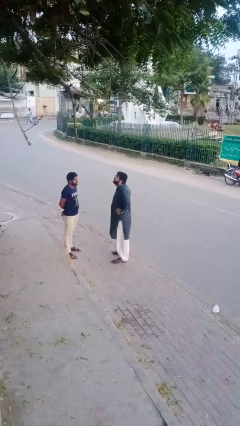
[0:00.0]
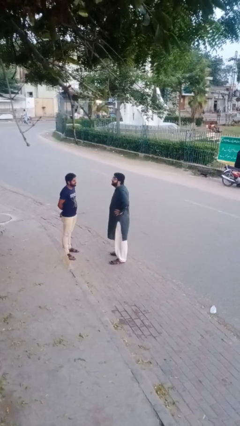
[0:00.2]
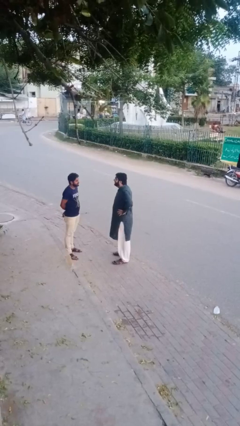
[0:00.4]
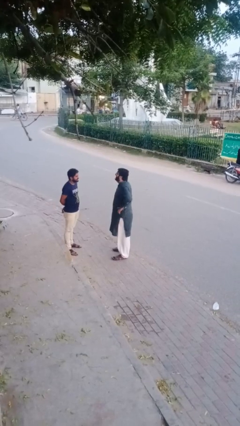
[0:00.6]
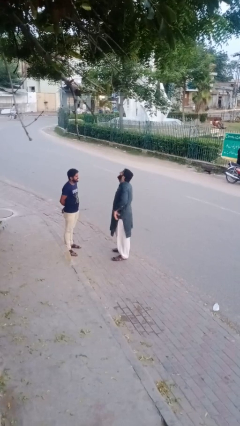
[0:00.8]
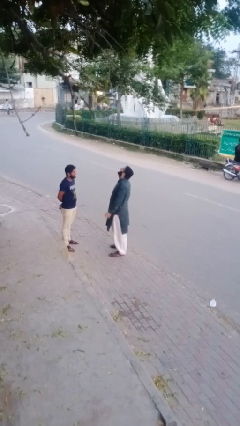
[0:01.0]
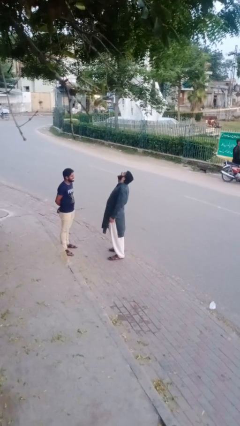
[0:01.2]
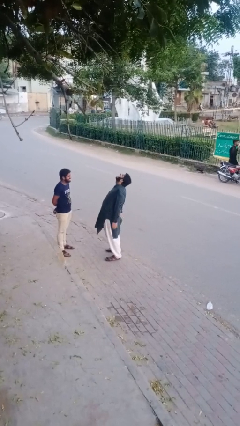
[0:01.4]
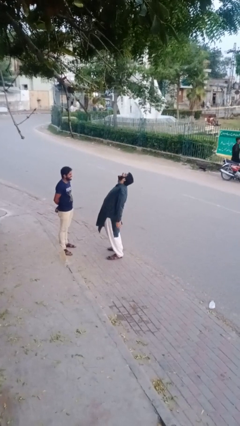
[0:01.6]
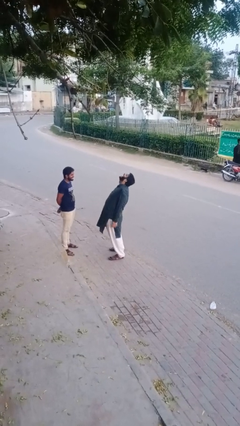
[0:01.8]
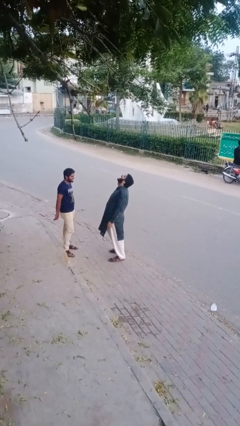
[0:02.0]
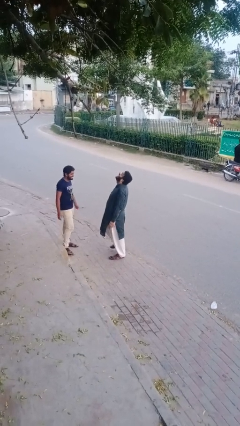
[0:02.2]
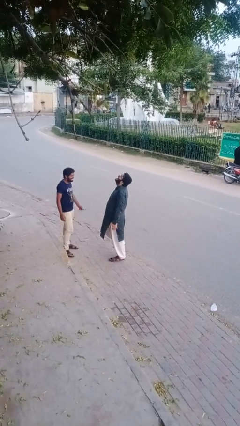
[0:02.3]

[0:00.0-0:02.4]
person laughs with person

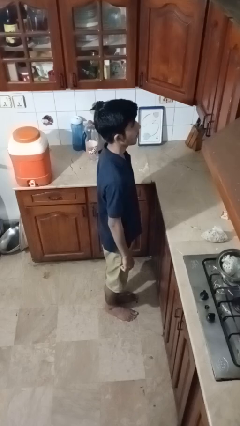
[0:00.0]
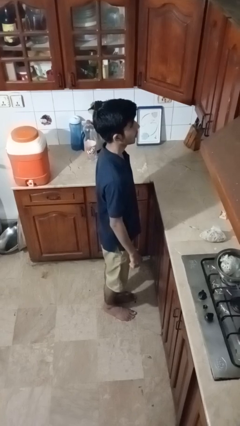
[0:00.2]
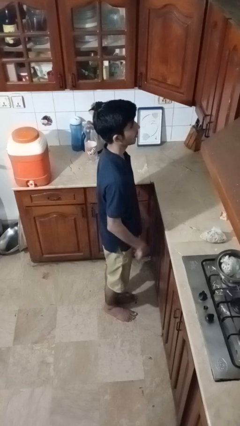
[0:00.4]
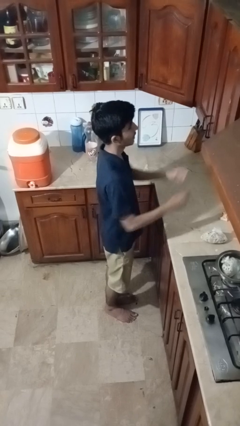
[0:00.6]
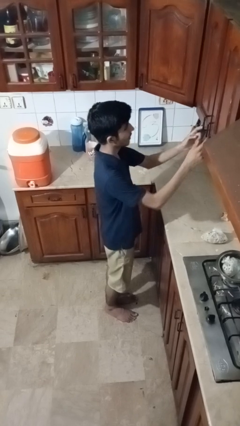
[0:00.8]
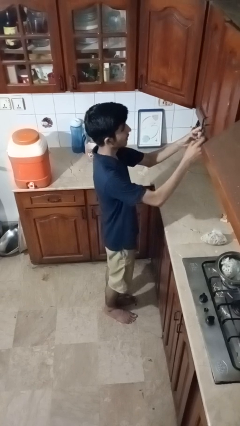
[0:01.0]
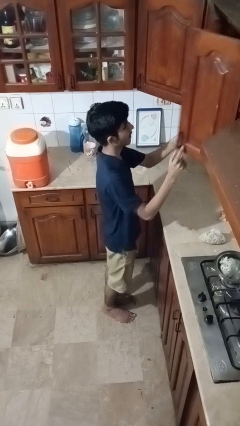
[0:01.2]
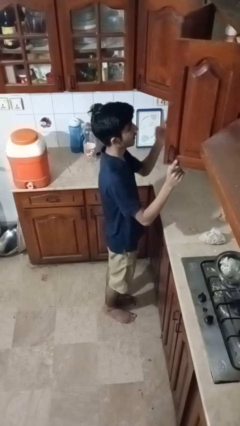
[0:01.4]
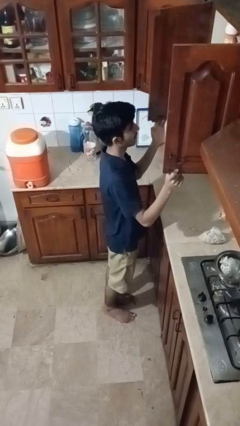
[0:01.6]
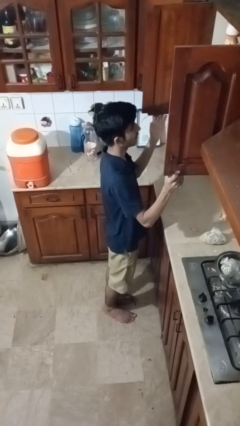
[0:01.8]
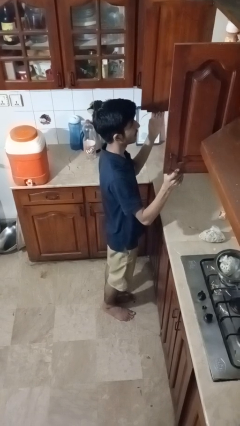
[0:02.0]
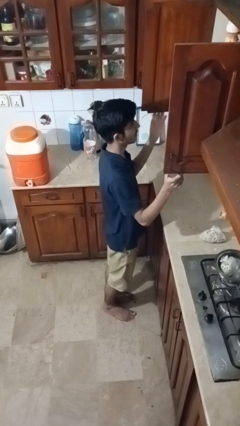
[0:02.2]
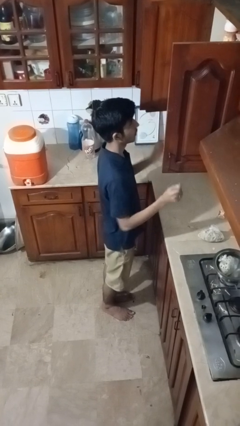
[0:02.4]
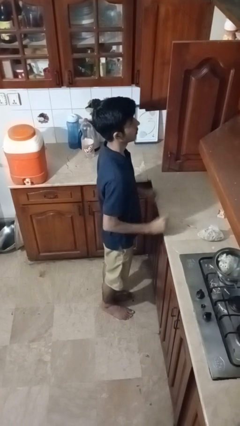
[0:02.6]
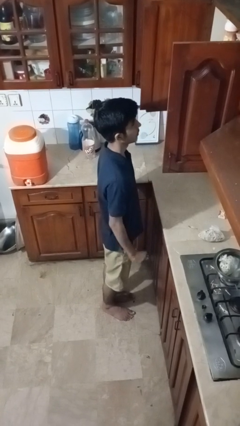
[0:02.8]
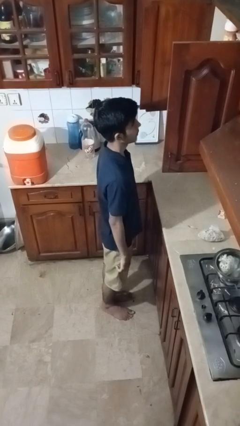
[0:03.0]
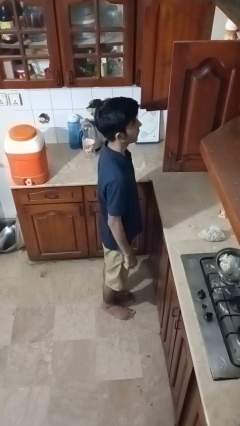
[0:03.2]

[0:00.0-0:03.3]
person opens cabinet

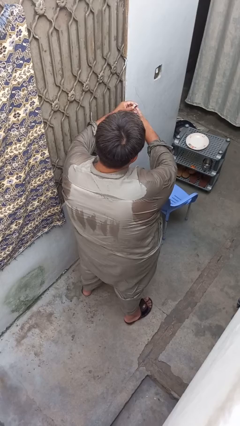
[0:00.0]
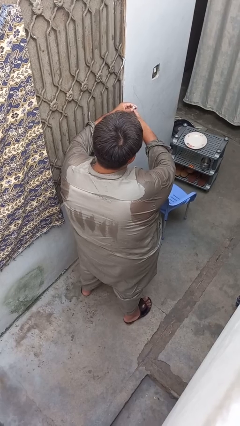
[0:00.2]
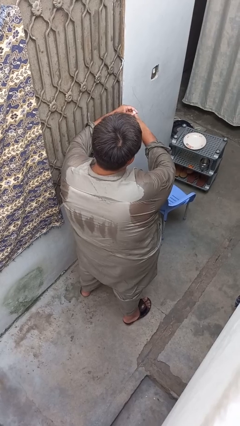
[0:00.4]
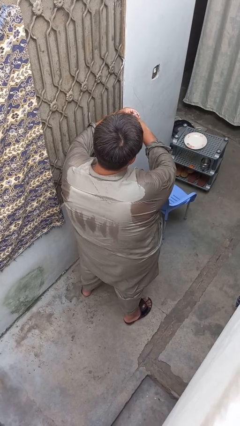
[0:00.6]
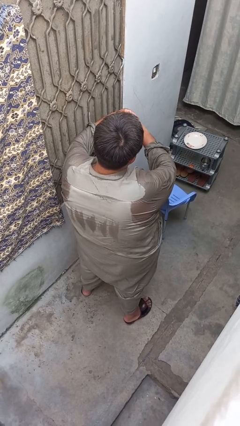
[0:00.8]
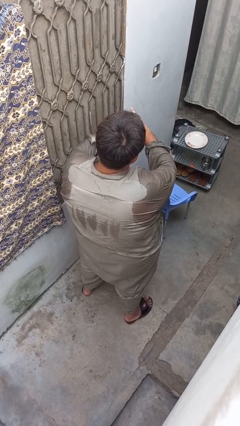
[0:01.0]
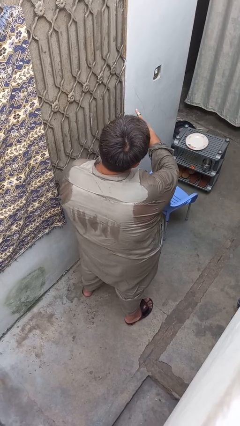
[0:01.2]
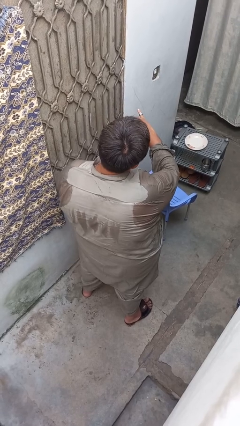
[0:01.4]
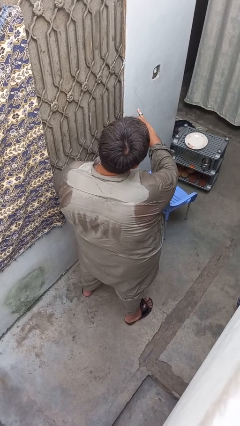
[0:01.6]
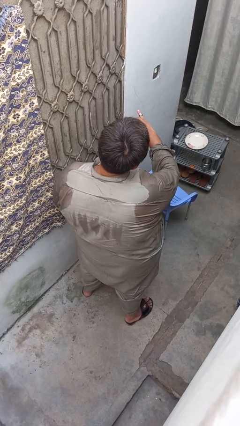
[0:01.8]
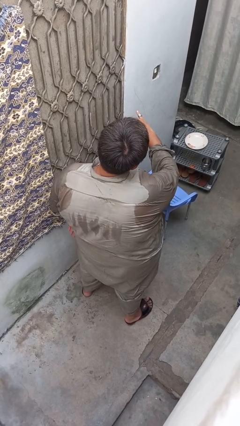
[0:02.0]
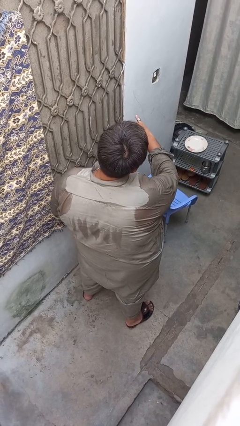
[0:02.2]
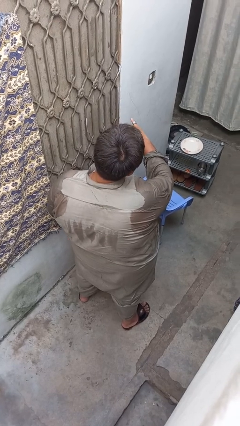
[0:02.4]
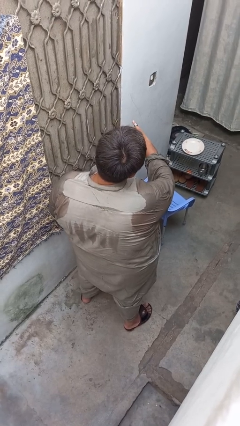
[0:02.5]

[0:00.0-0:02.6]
person puts on ring

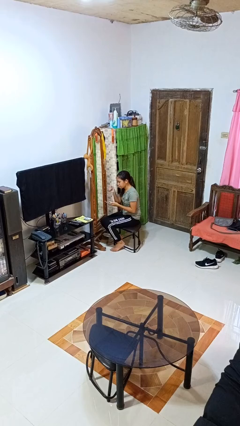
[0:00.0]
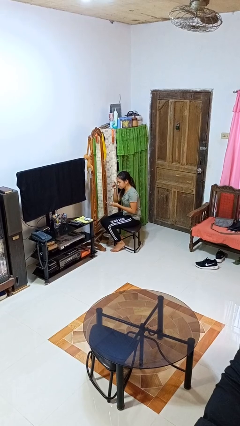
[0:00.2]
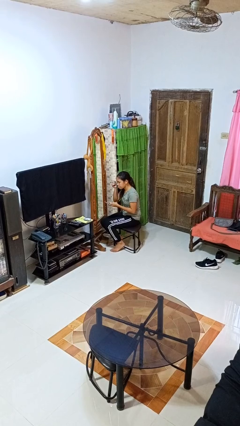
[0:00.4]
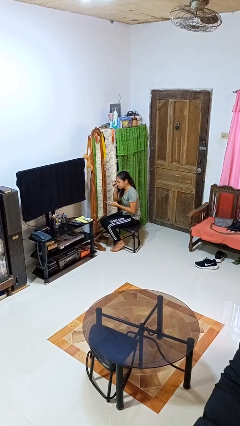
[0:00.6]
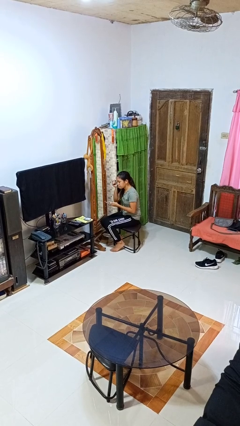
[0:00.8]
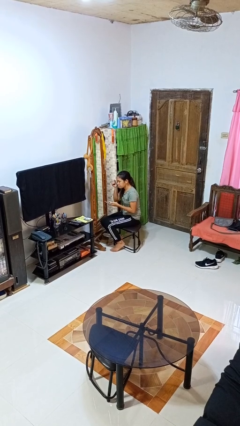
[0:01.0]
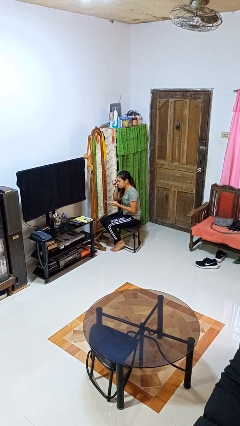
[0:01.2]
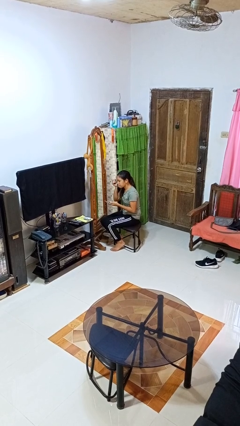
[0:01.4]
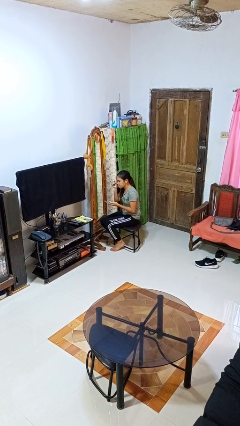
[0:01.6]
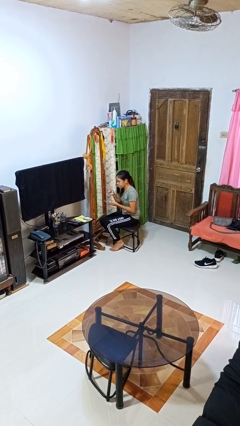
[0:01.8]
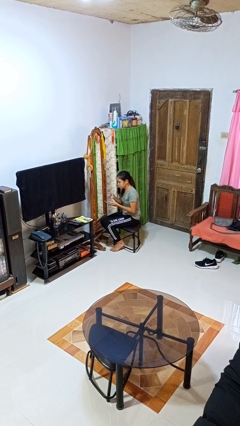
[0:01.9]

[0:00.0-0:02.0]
person applies eye makeup

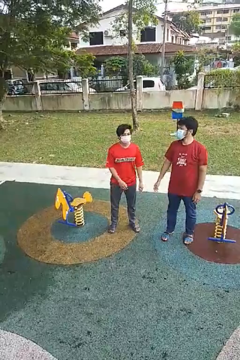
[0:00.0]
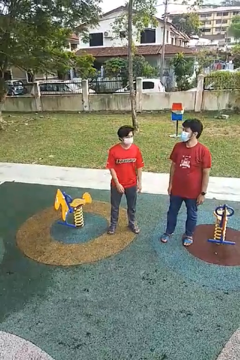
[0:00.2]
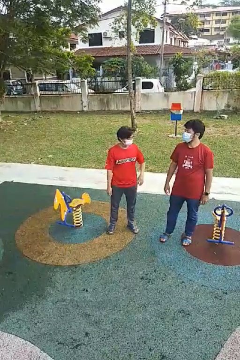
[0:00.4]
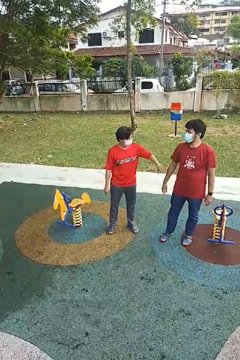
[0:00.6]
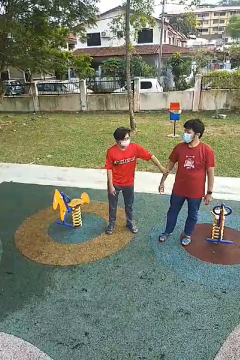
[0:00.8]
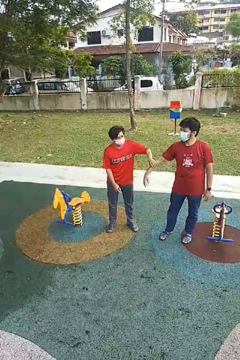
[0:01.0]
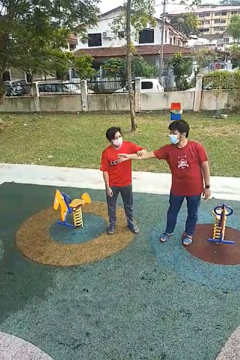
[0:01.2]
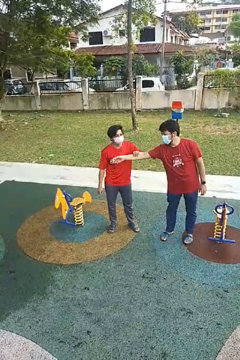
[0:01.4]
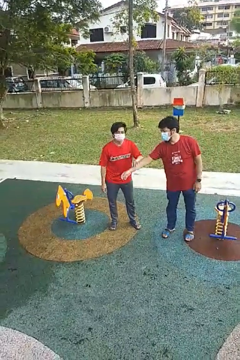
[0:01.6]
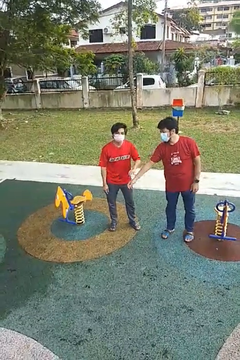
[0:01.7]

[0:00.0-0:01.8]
person grabs person by forearm

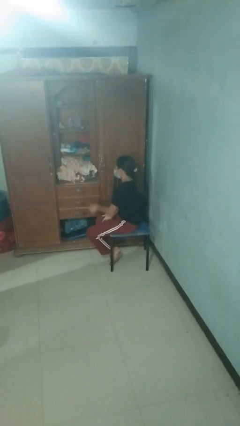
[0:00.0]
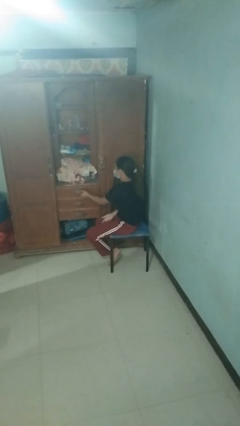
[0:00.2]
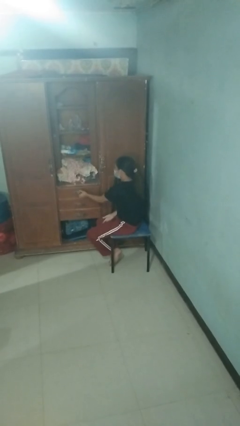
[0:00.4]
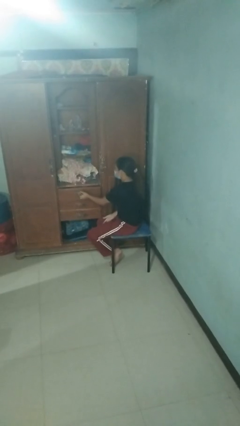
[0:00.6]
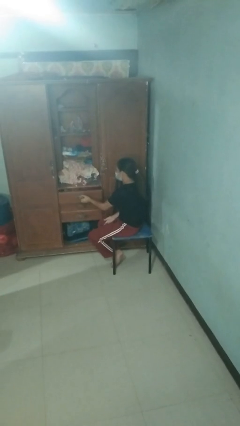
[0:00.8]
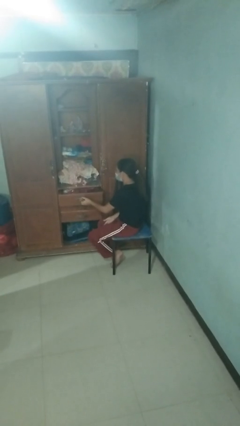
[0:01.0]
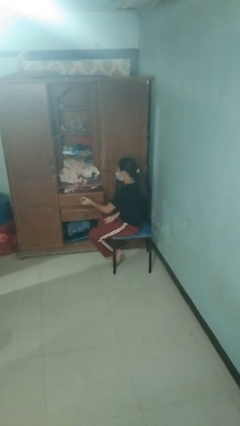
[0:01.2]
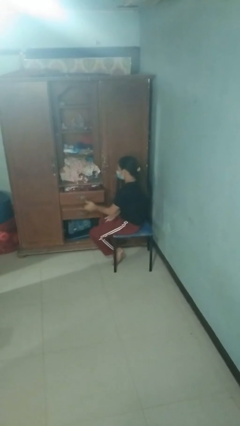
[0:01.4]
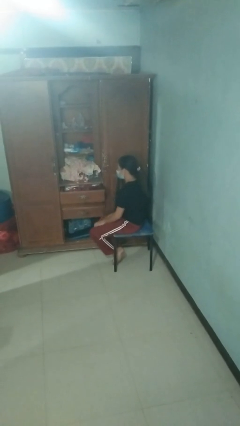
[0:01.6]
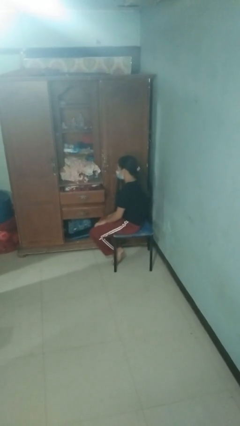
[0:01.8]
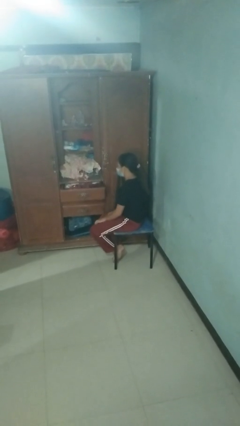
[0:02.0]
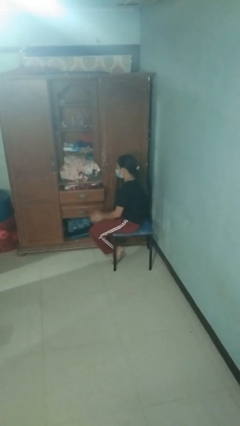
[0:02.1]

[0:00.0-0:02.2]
person opens dresser drawer

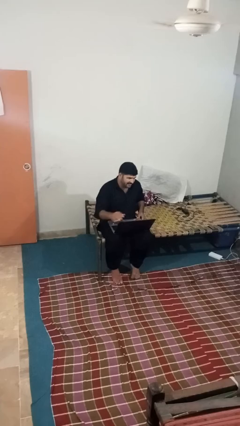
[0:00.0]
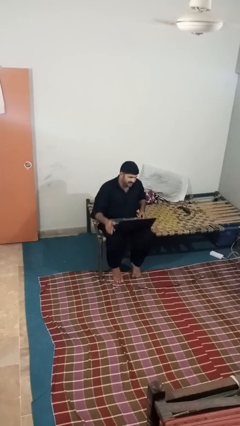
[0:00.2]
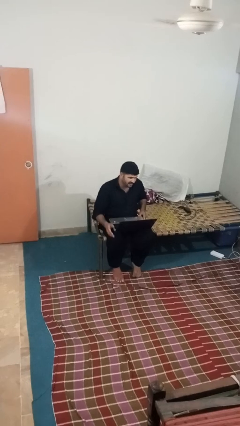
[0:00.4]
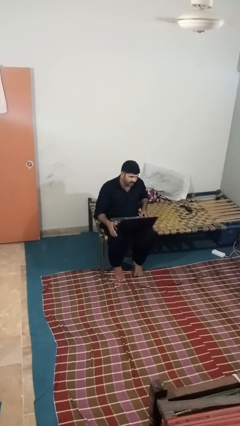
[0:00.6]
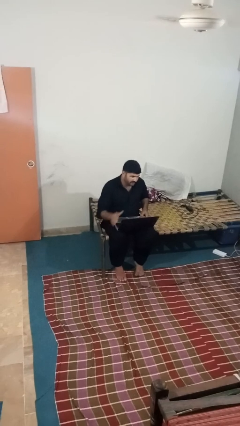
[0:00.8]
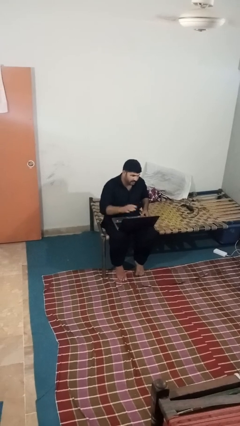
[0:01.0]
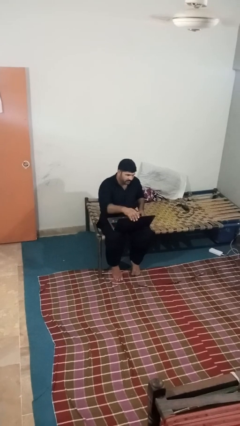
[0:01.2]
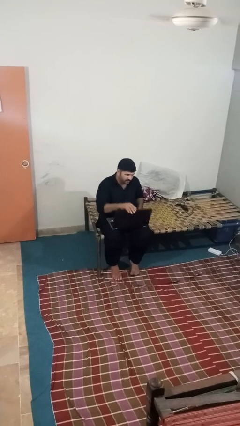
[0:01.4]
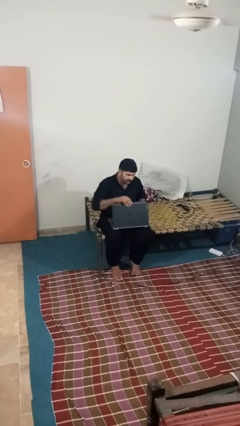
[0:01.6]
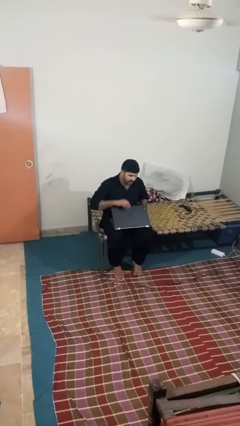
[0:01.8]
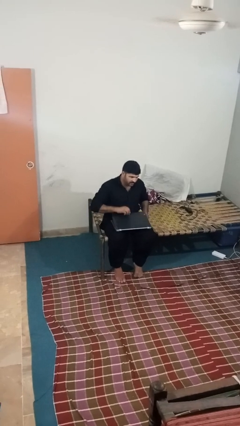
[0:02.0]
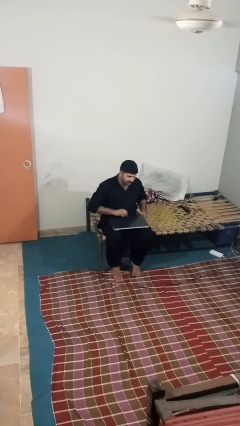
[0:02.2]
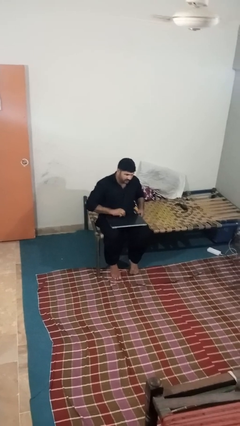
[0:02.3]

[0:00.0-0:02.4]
person closes laptop

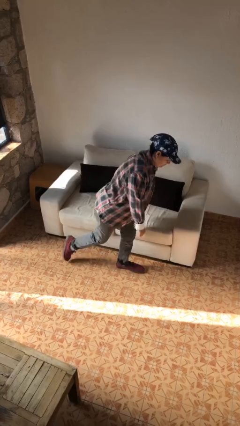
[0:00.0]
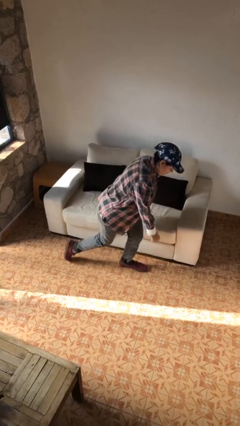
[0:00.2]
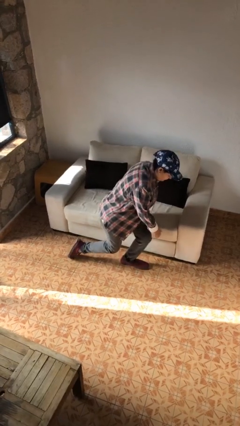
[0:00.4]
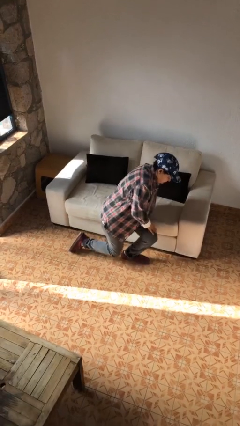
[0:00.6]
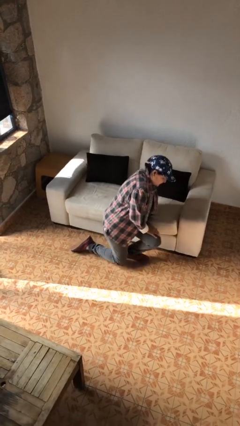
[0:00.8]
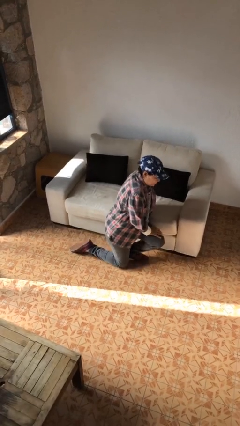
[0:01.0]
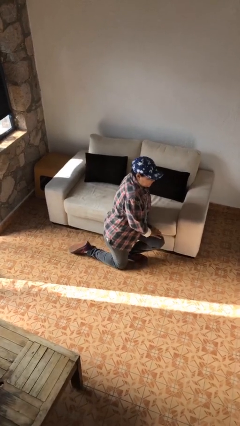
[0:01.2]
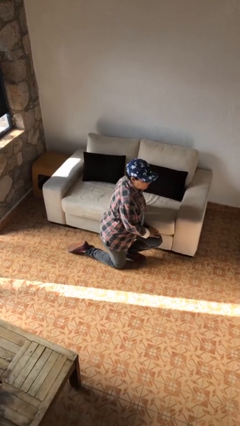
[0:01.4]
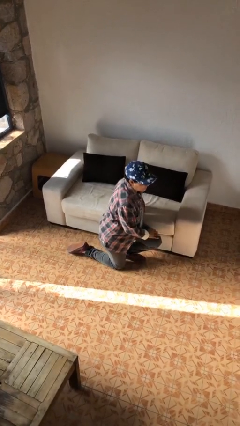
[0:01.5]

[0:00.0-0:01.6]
person kneels
